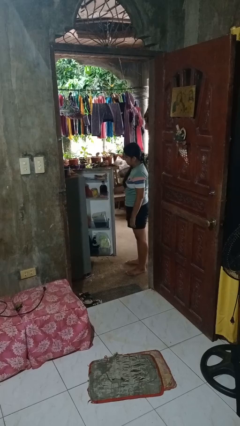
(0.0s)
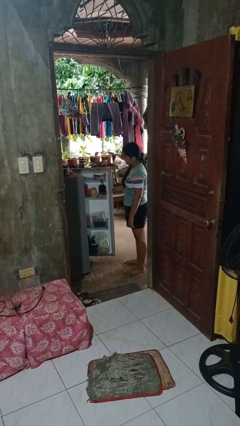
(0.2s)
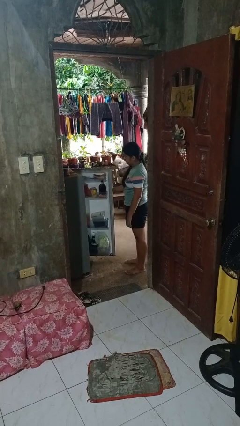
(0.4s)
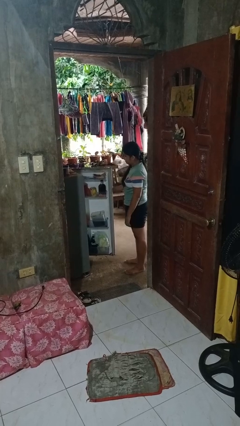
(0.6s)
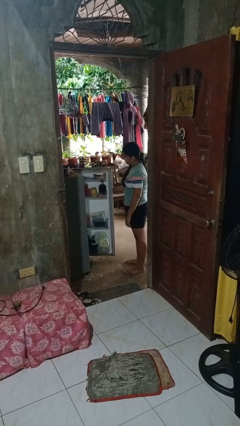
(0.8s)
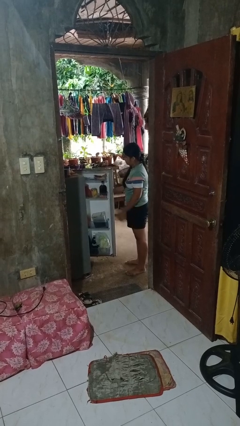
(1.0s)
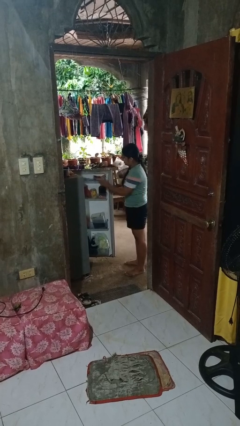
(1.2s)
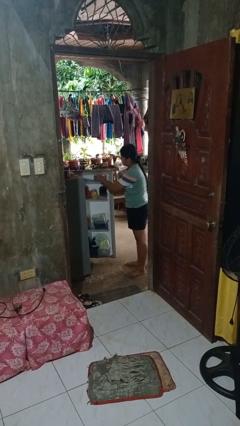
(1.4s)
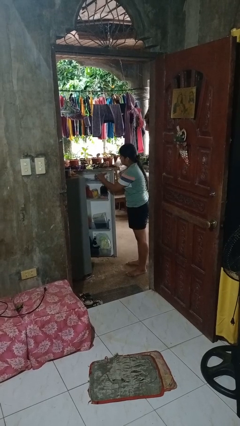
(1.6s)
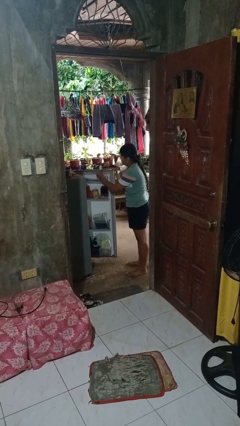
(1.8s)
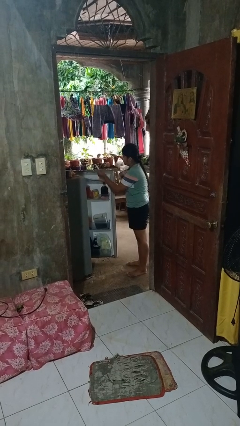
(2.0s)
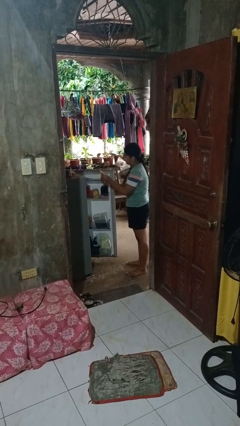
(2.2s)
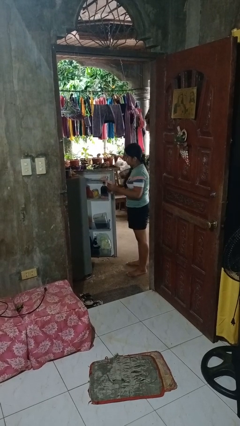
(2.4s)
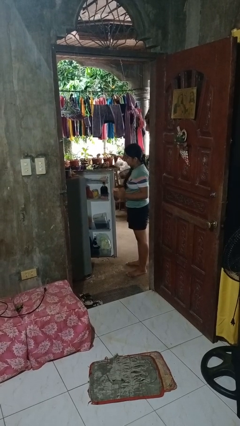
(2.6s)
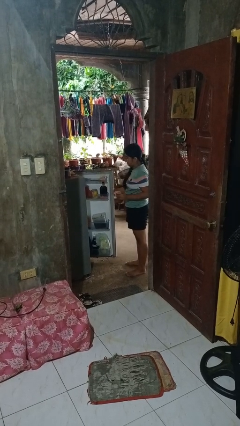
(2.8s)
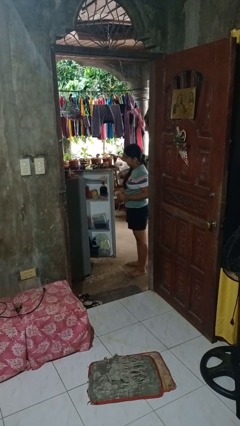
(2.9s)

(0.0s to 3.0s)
person takes object from refrigerator

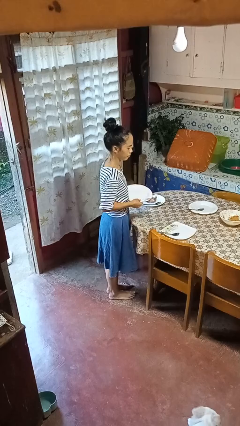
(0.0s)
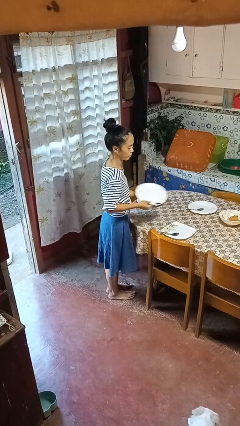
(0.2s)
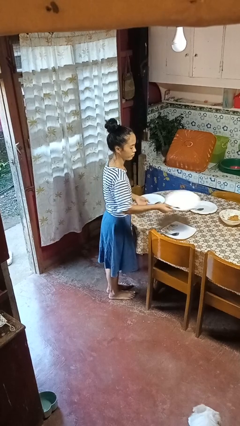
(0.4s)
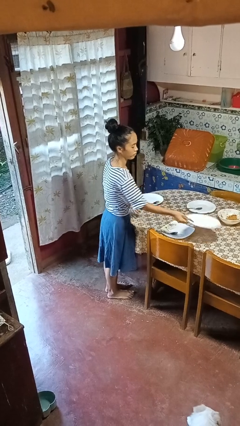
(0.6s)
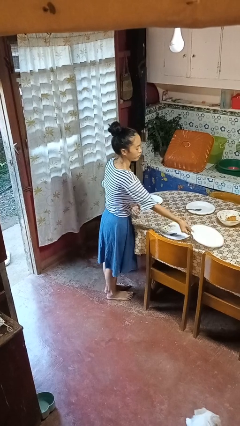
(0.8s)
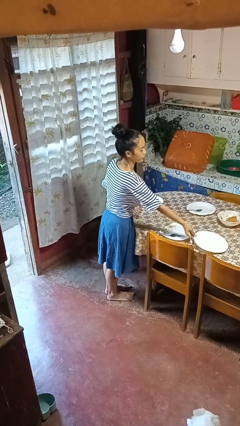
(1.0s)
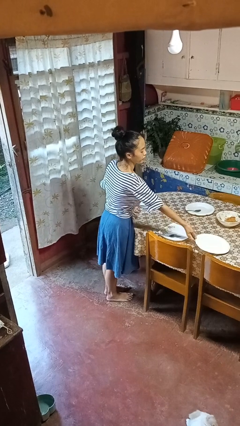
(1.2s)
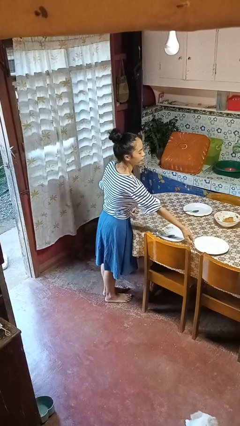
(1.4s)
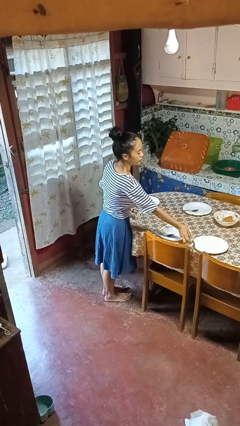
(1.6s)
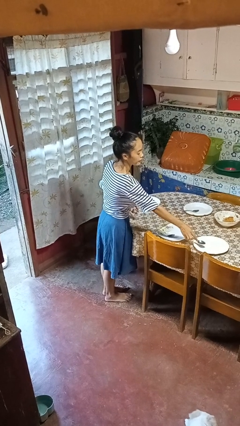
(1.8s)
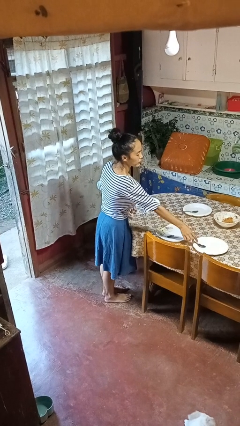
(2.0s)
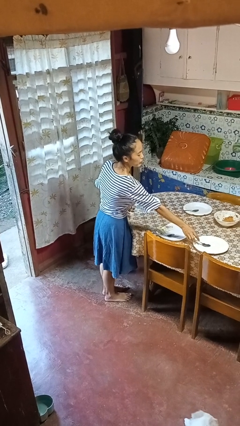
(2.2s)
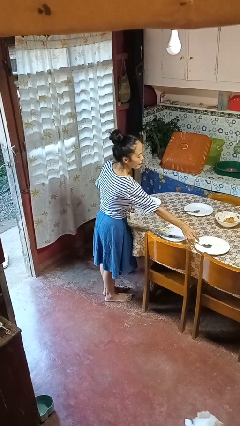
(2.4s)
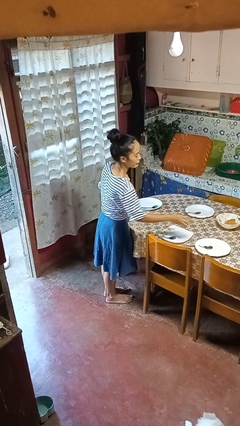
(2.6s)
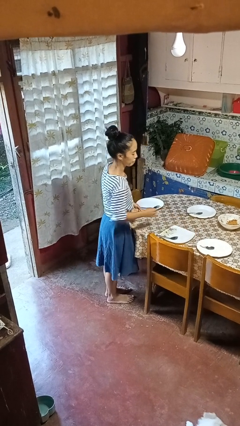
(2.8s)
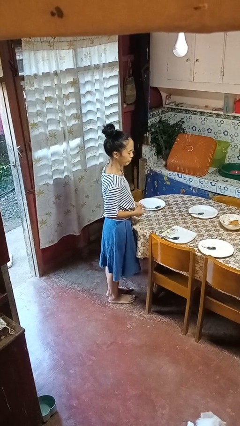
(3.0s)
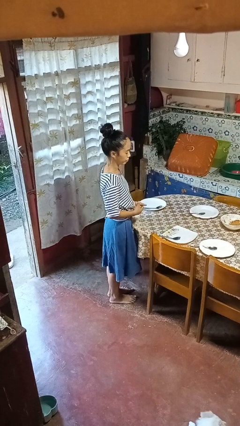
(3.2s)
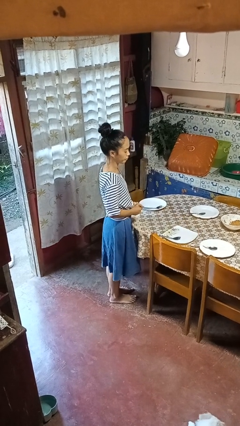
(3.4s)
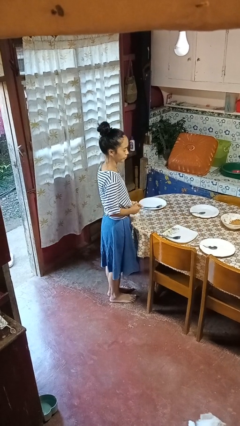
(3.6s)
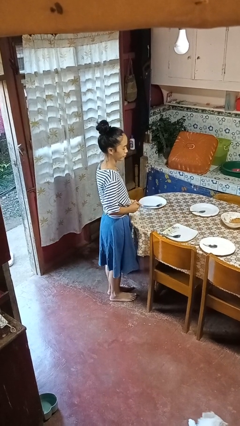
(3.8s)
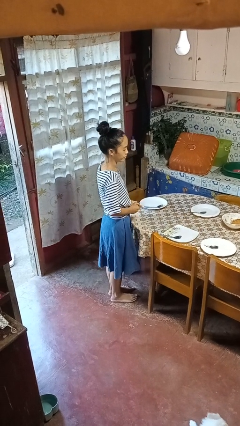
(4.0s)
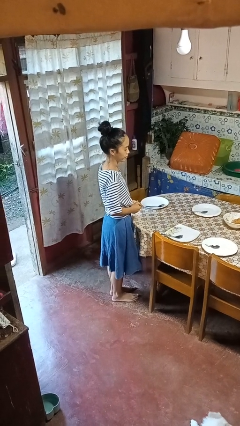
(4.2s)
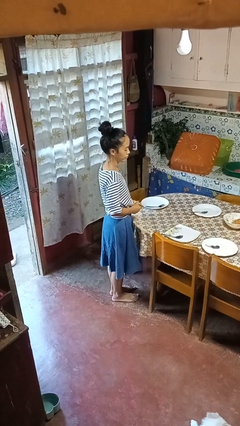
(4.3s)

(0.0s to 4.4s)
person sets table

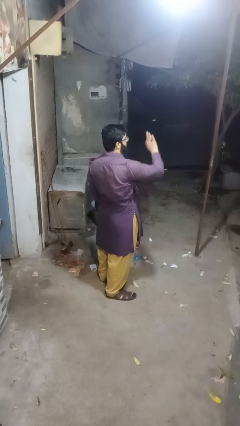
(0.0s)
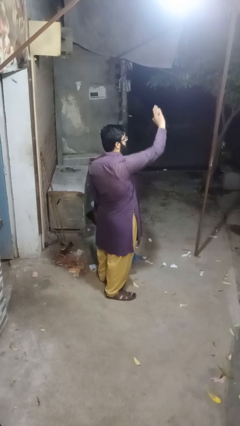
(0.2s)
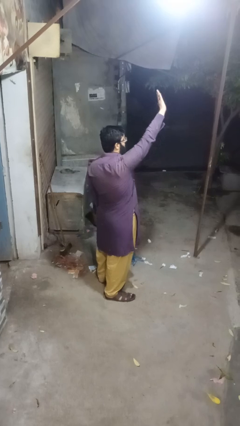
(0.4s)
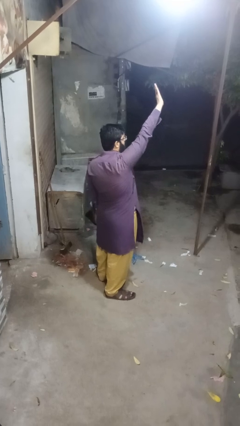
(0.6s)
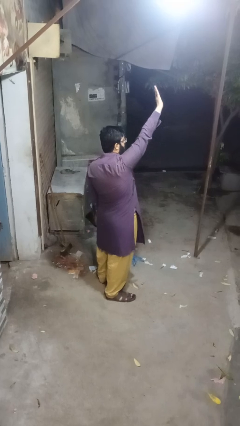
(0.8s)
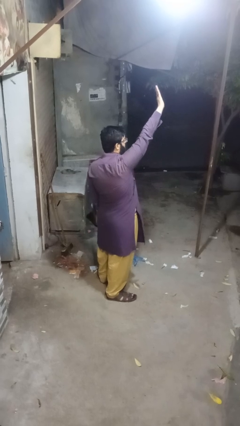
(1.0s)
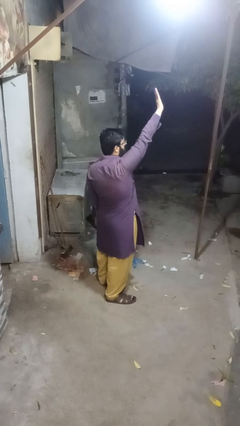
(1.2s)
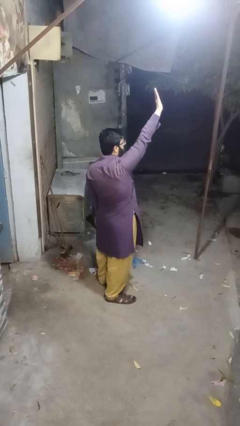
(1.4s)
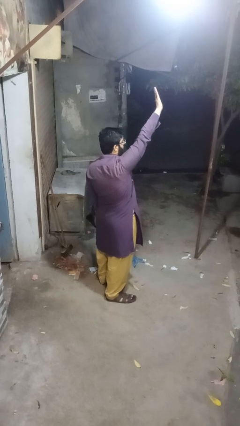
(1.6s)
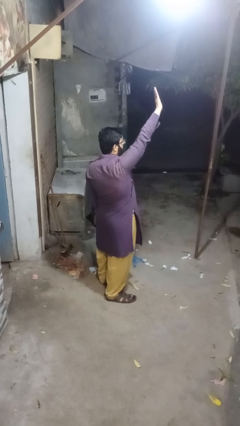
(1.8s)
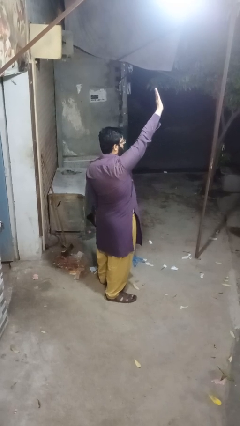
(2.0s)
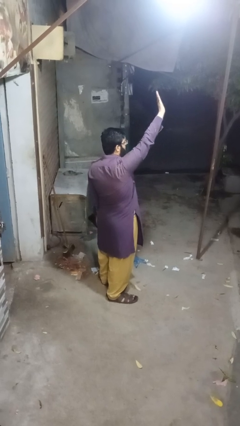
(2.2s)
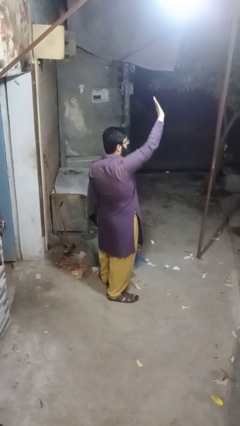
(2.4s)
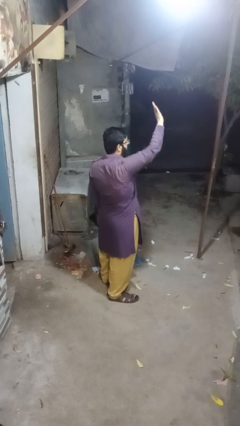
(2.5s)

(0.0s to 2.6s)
person gestures swipe up

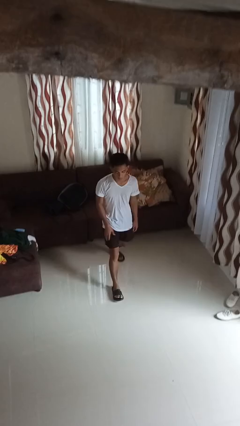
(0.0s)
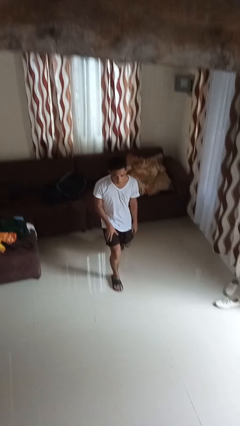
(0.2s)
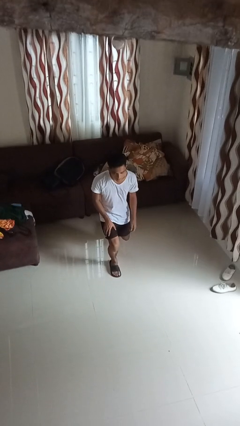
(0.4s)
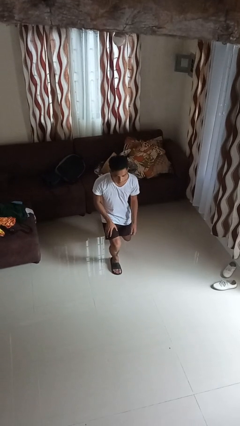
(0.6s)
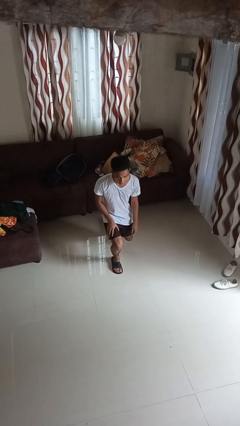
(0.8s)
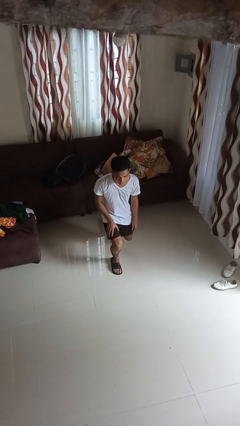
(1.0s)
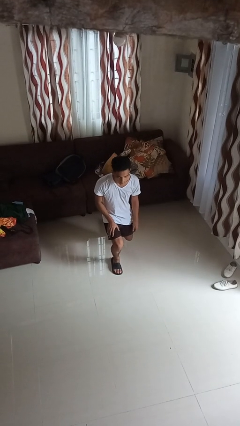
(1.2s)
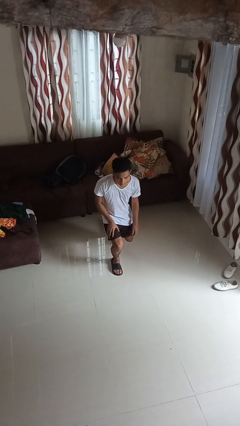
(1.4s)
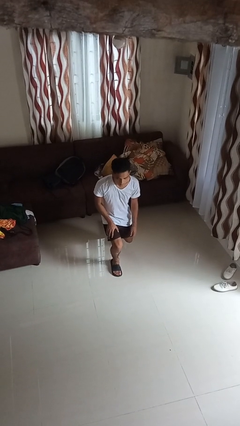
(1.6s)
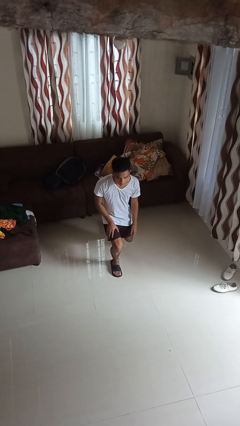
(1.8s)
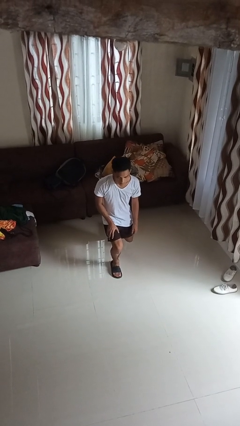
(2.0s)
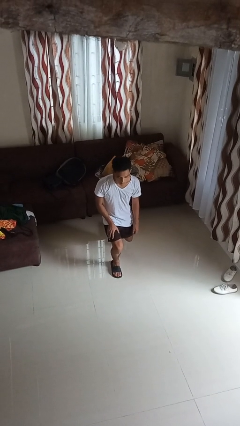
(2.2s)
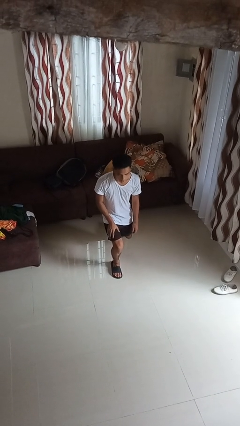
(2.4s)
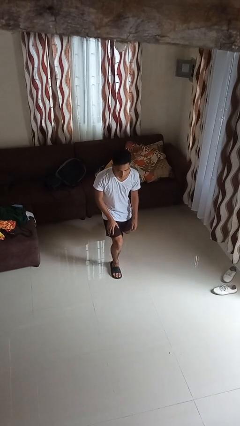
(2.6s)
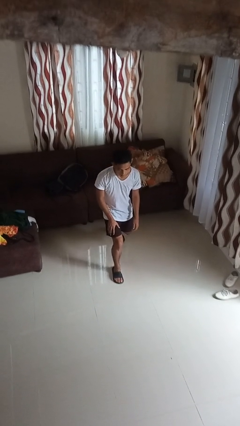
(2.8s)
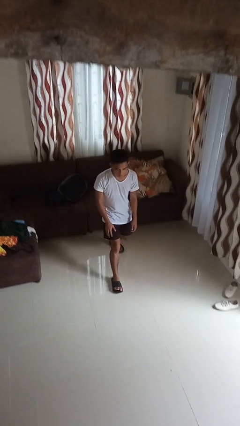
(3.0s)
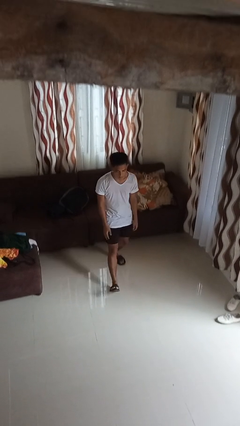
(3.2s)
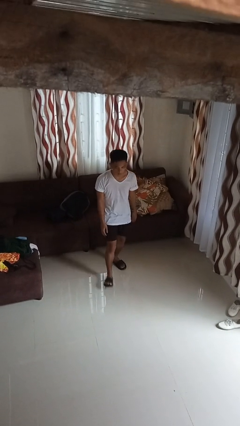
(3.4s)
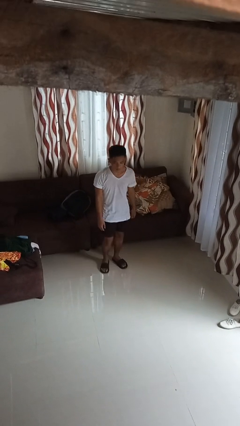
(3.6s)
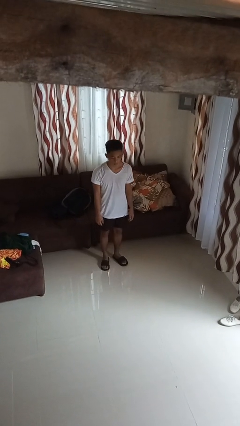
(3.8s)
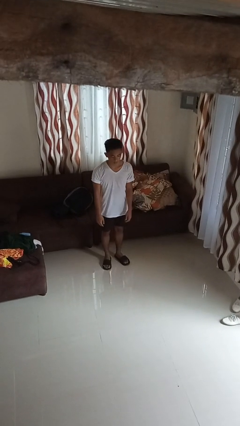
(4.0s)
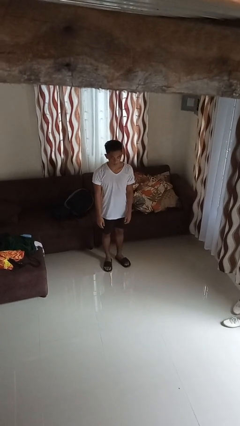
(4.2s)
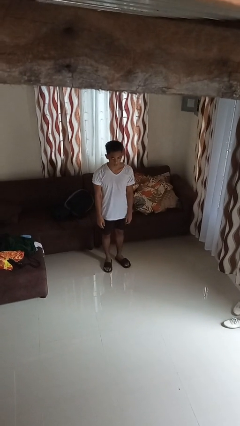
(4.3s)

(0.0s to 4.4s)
person exercises with lunges

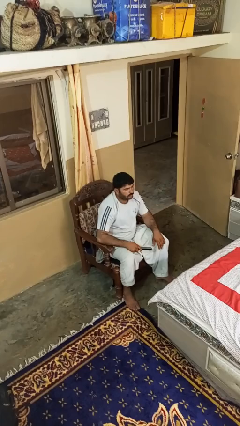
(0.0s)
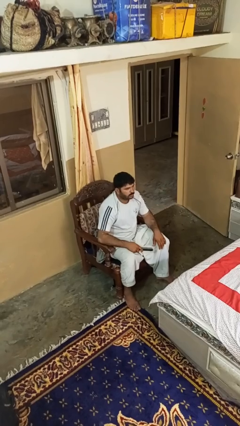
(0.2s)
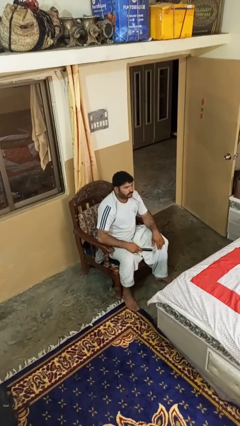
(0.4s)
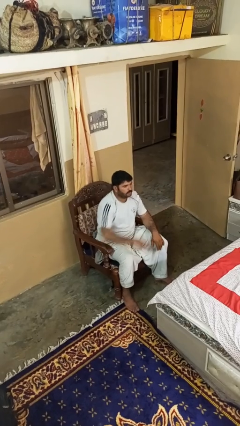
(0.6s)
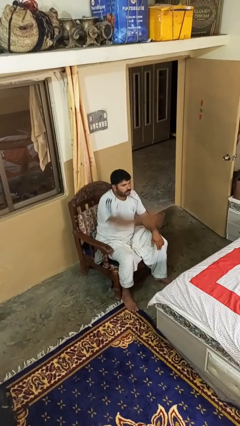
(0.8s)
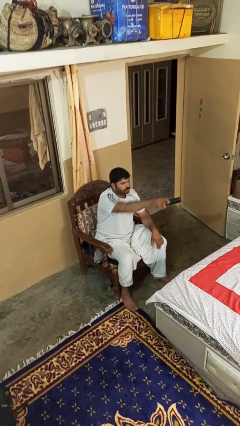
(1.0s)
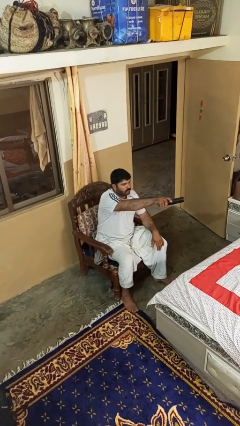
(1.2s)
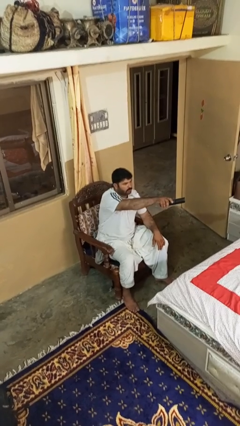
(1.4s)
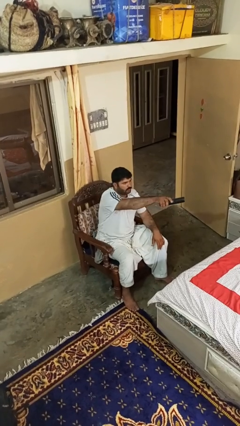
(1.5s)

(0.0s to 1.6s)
person uses television remote

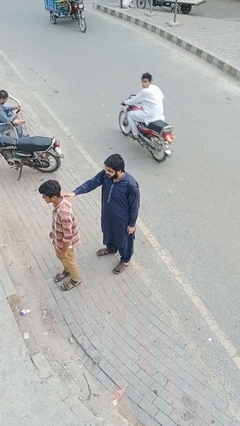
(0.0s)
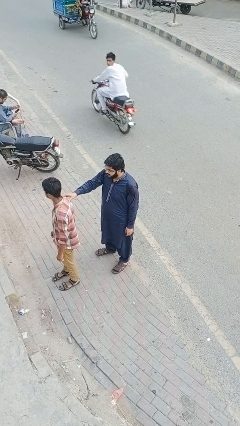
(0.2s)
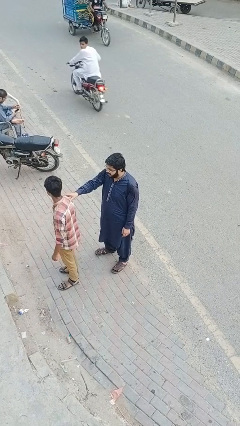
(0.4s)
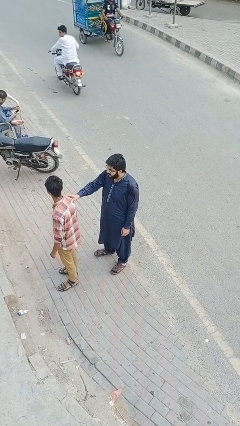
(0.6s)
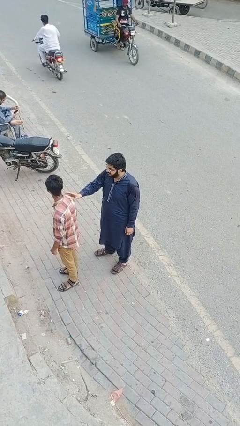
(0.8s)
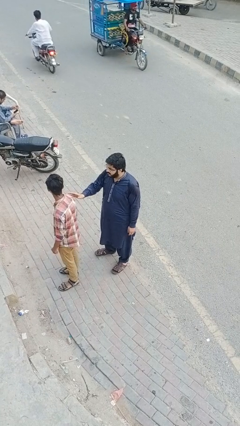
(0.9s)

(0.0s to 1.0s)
person grabs person by shoulder

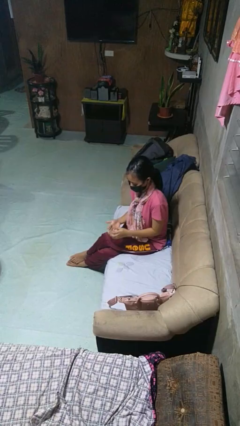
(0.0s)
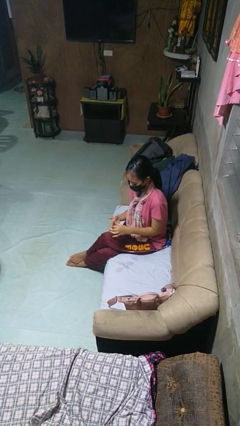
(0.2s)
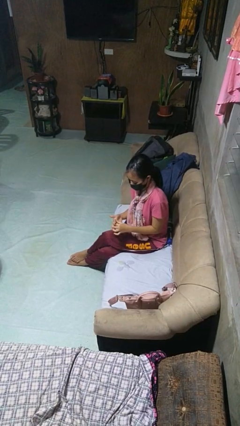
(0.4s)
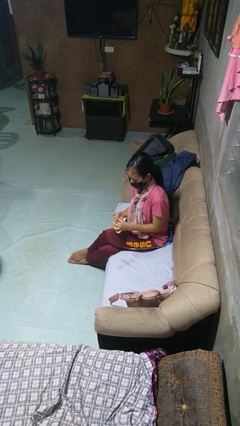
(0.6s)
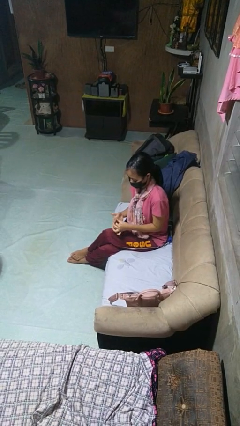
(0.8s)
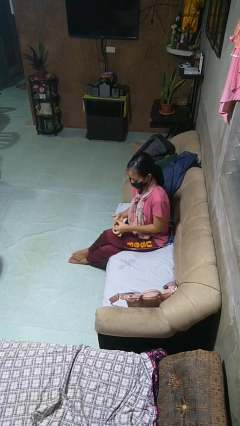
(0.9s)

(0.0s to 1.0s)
person takes off ring
